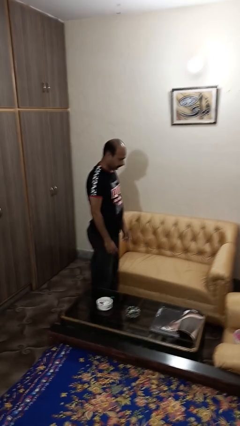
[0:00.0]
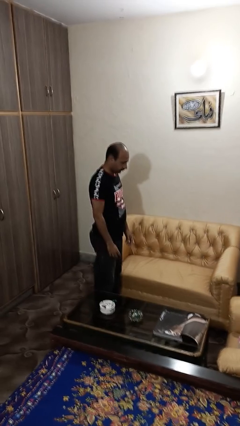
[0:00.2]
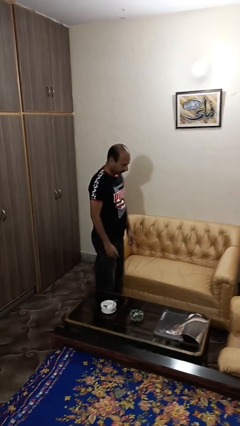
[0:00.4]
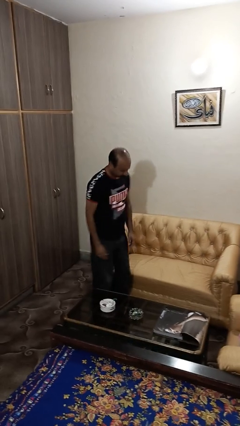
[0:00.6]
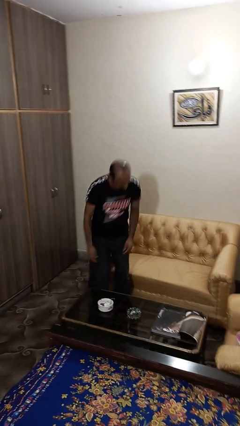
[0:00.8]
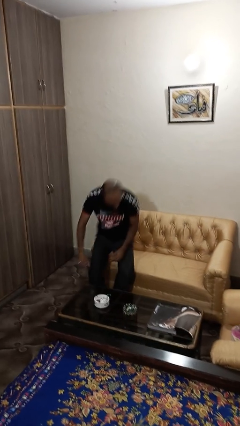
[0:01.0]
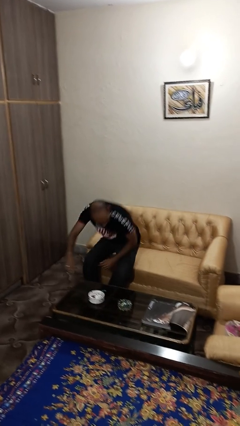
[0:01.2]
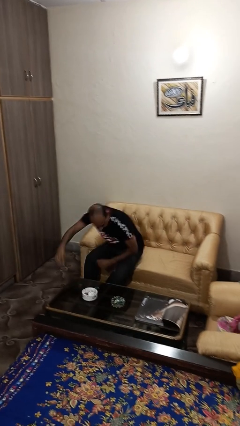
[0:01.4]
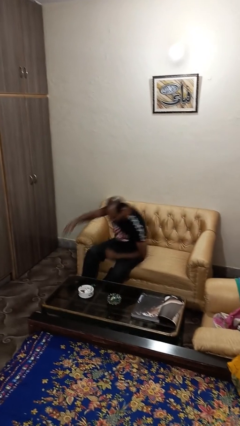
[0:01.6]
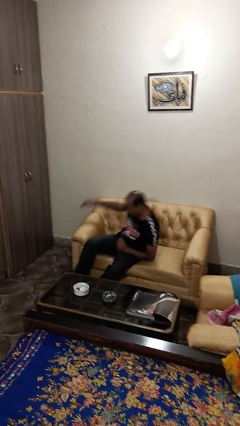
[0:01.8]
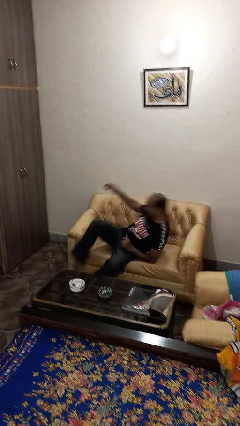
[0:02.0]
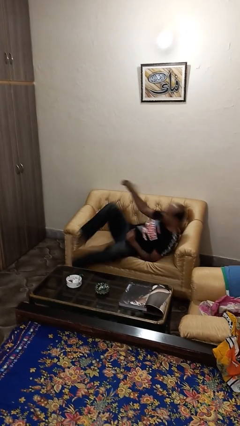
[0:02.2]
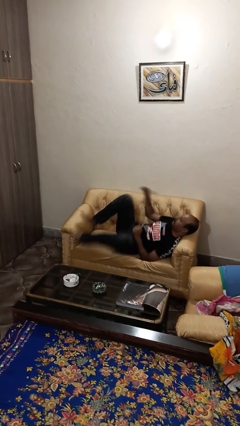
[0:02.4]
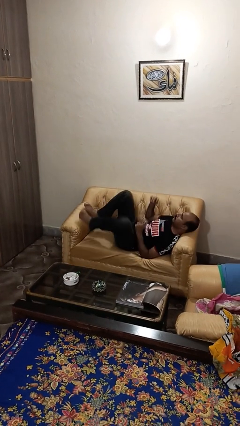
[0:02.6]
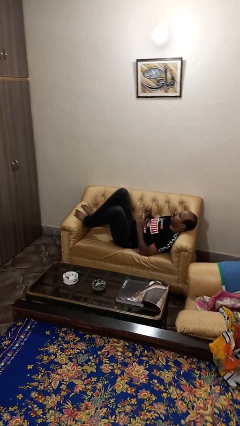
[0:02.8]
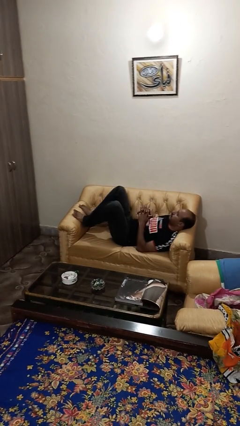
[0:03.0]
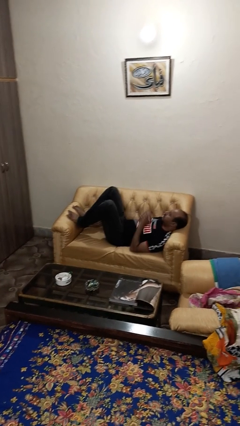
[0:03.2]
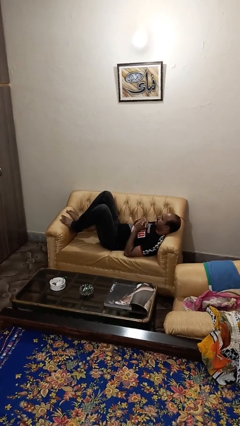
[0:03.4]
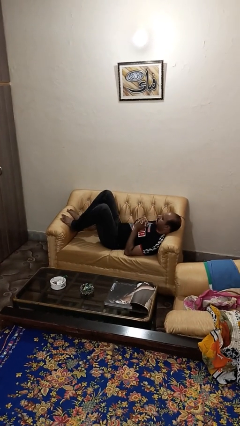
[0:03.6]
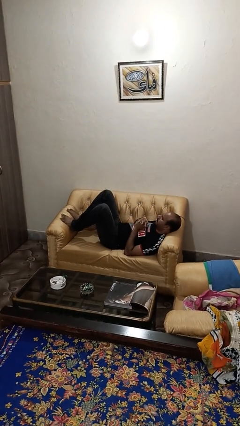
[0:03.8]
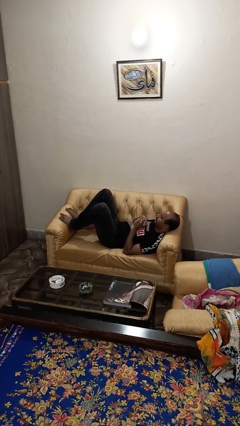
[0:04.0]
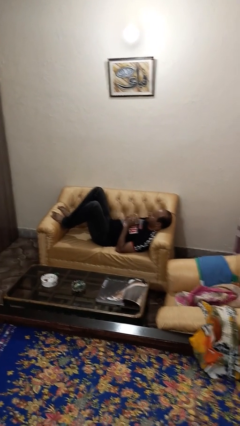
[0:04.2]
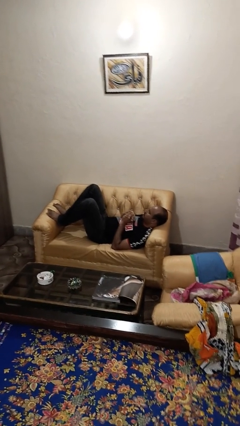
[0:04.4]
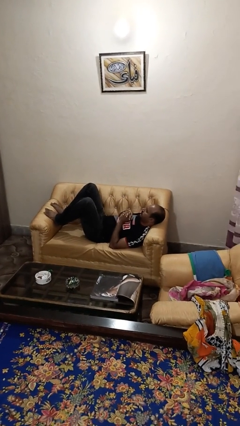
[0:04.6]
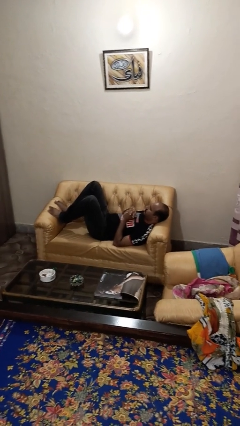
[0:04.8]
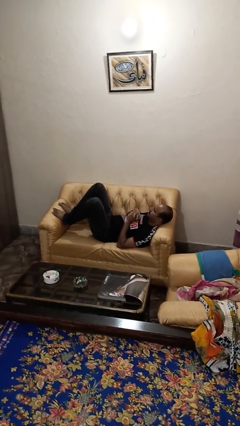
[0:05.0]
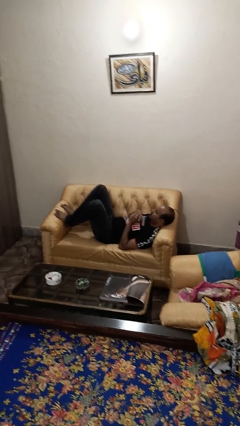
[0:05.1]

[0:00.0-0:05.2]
person lies down on couch

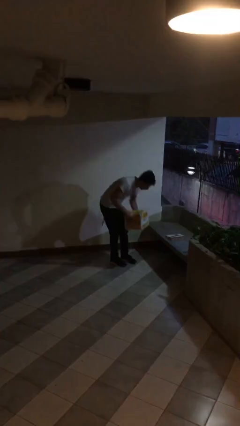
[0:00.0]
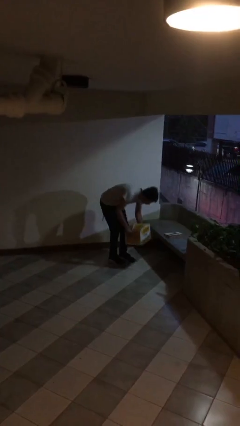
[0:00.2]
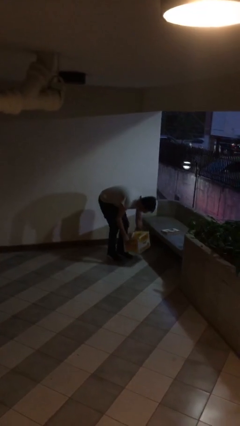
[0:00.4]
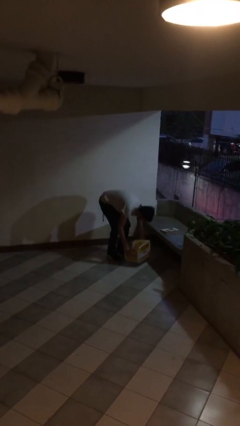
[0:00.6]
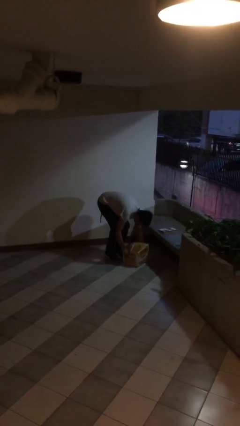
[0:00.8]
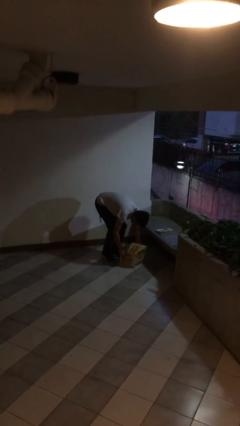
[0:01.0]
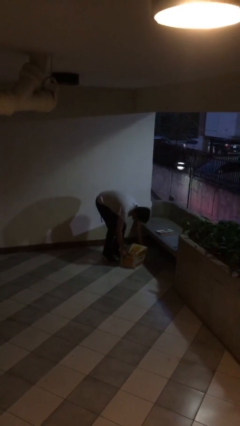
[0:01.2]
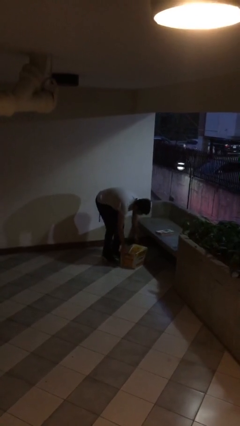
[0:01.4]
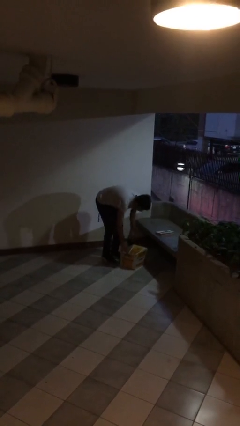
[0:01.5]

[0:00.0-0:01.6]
person puts down object on floor

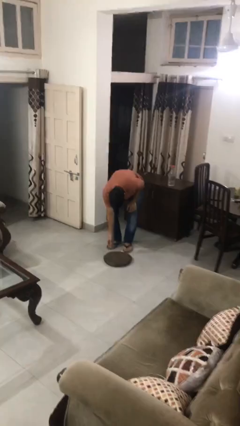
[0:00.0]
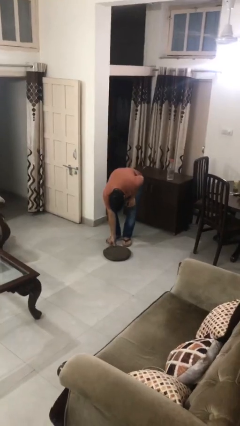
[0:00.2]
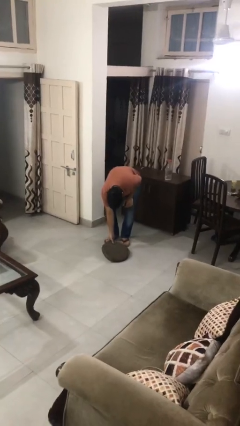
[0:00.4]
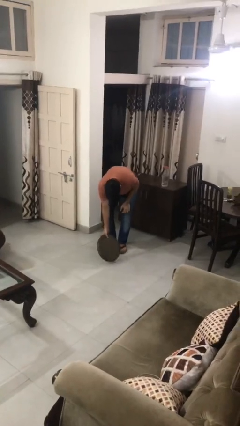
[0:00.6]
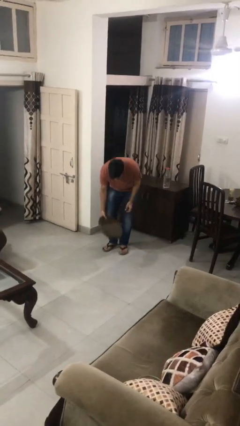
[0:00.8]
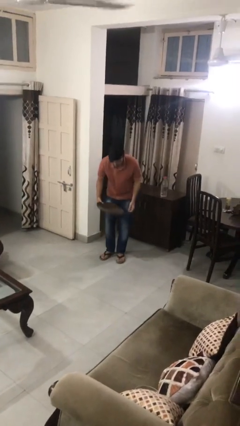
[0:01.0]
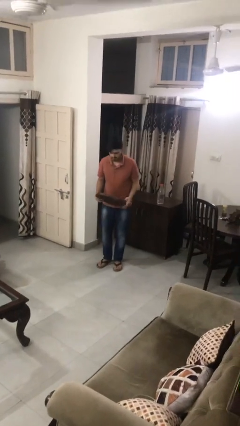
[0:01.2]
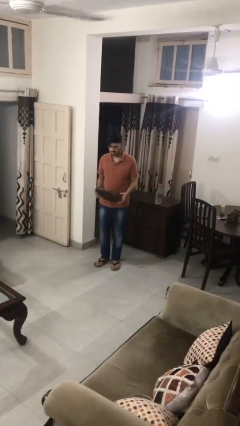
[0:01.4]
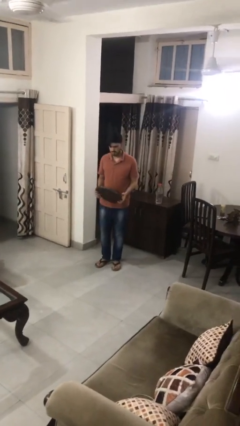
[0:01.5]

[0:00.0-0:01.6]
person picks up object from floor

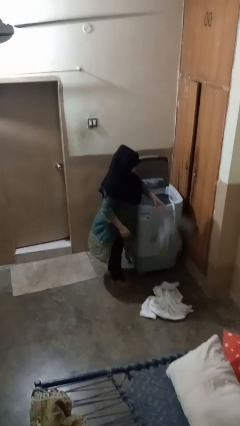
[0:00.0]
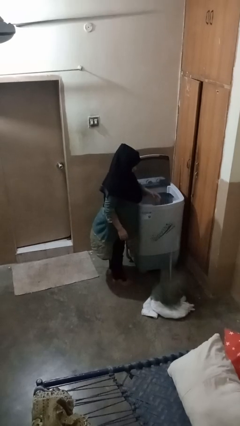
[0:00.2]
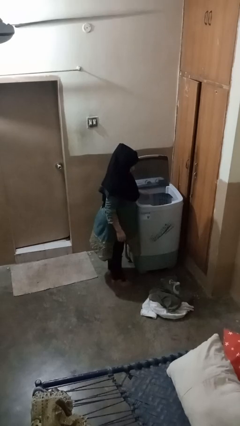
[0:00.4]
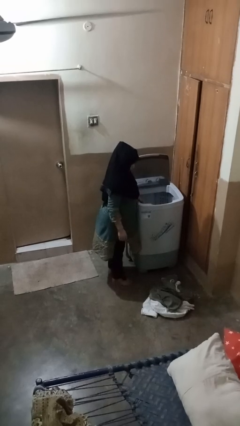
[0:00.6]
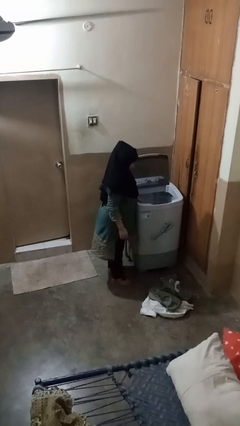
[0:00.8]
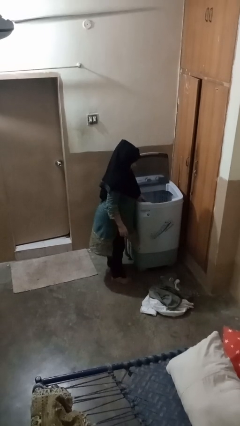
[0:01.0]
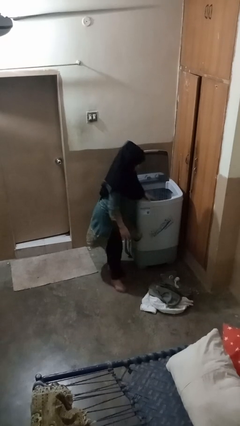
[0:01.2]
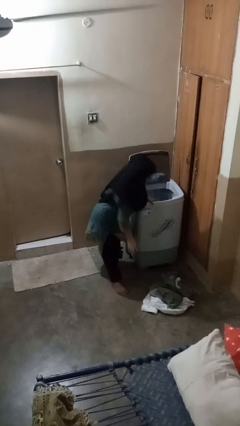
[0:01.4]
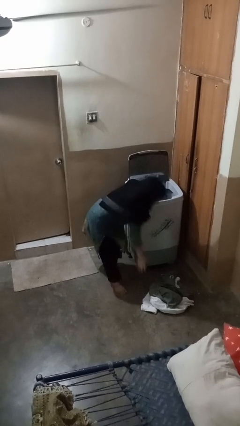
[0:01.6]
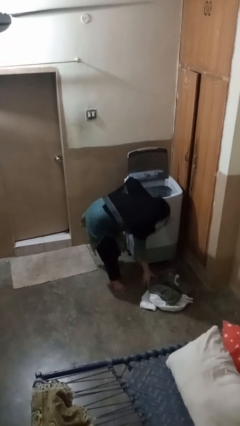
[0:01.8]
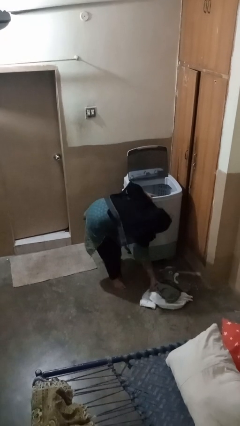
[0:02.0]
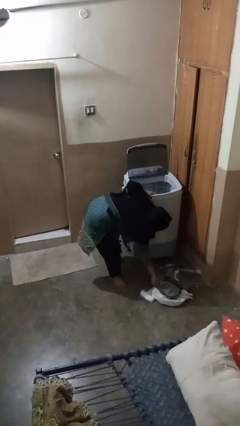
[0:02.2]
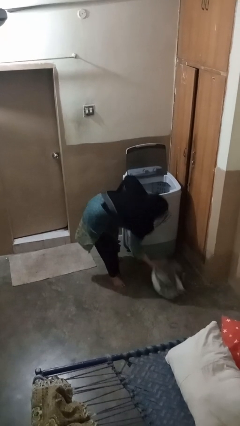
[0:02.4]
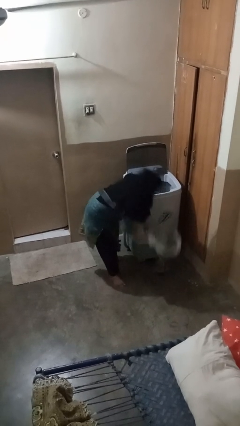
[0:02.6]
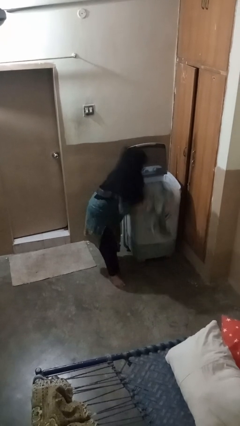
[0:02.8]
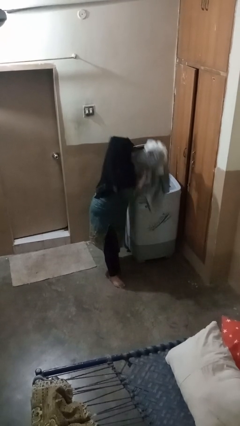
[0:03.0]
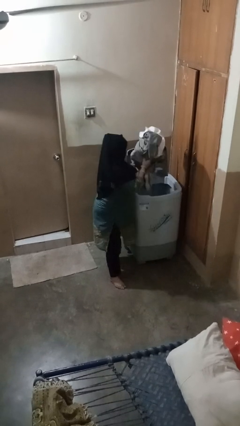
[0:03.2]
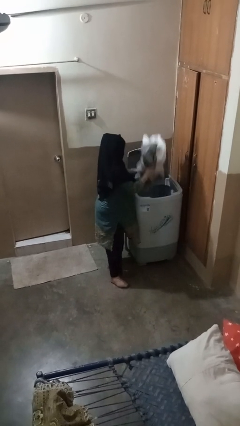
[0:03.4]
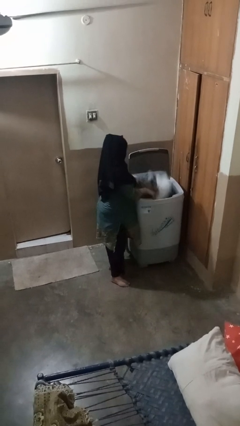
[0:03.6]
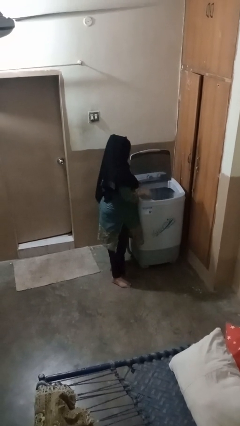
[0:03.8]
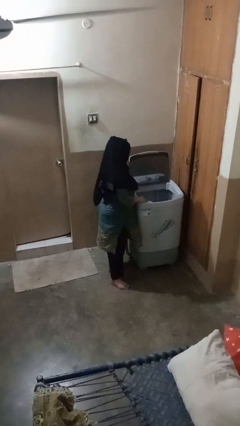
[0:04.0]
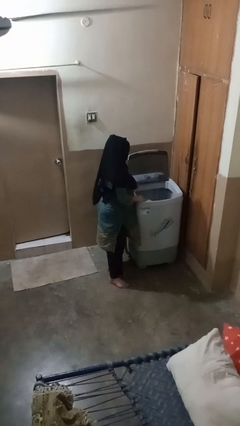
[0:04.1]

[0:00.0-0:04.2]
person loads clotheswasher

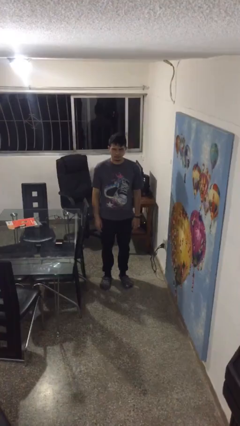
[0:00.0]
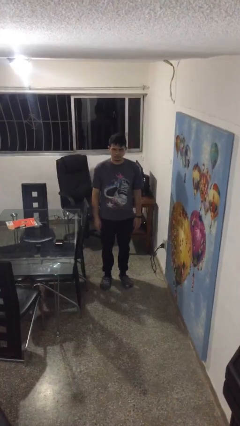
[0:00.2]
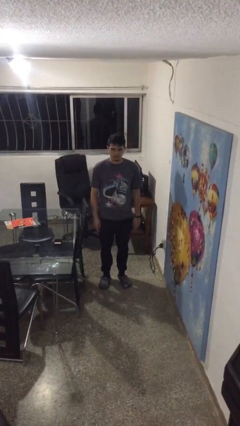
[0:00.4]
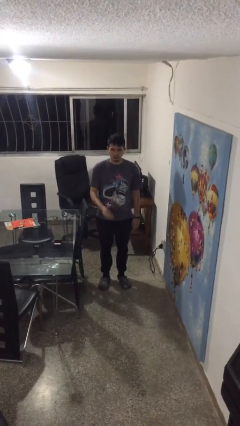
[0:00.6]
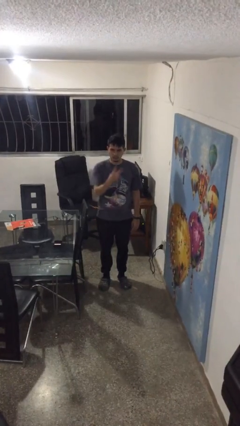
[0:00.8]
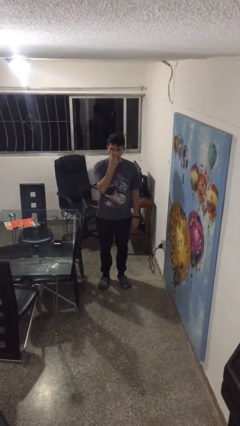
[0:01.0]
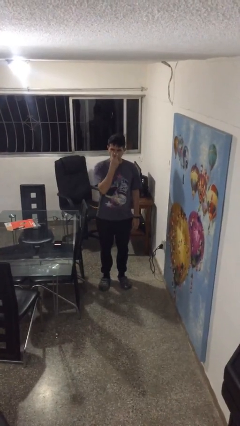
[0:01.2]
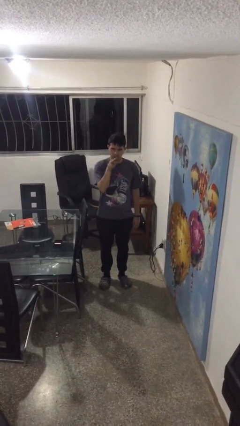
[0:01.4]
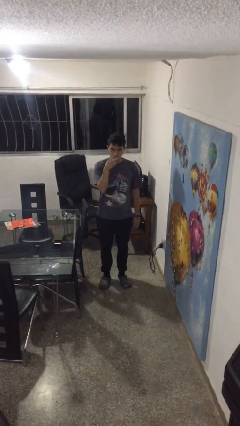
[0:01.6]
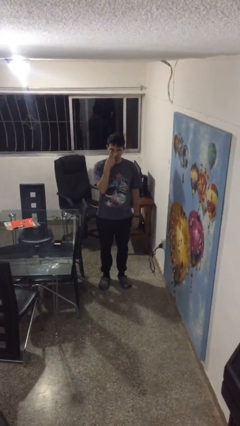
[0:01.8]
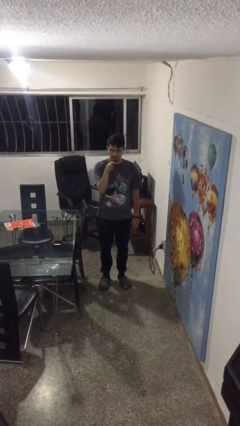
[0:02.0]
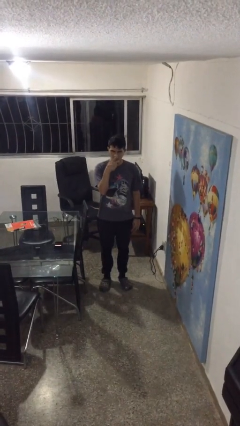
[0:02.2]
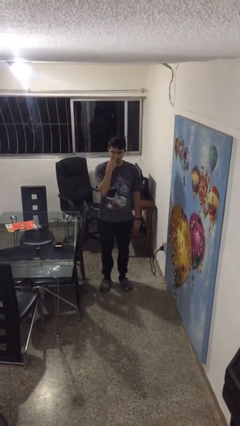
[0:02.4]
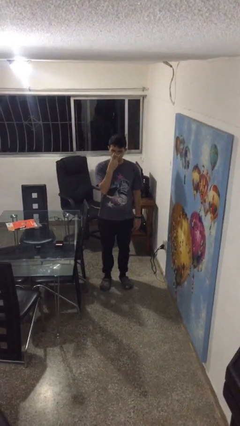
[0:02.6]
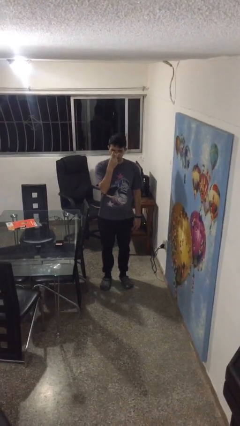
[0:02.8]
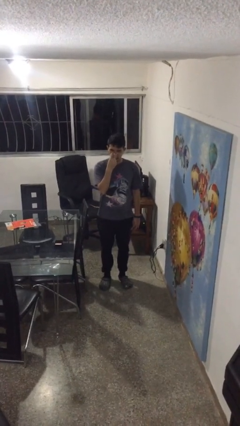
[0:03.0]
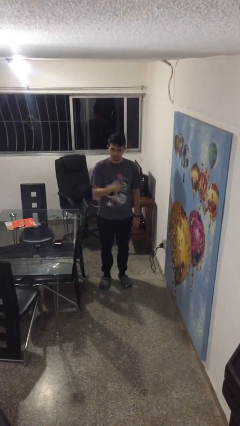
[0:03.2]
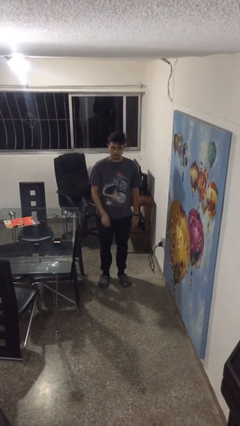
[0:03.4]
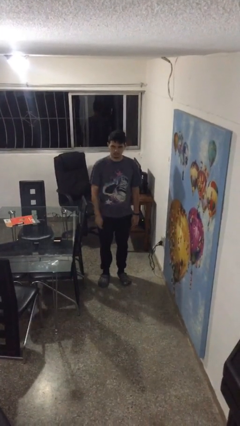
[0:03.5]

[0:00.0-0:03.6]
person gestures watch closely

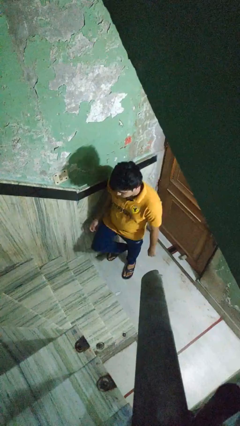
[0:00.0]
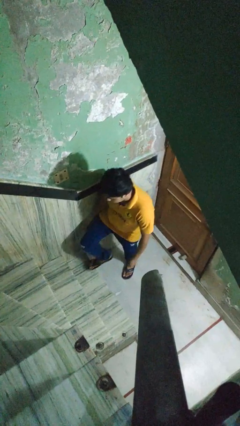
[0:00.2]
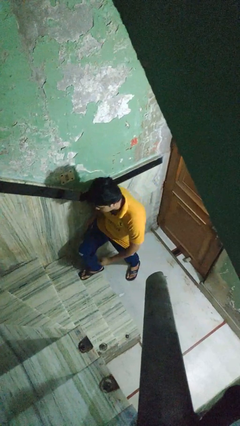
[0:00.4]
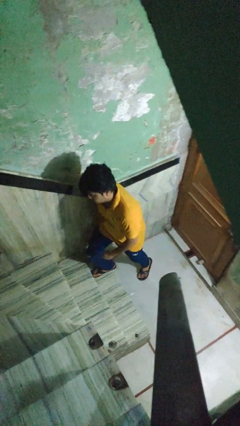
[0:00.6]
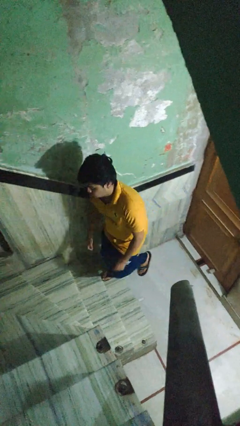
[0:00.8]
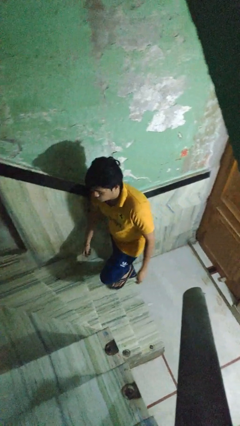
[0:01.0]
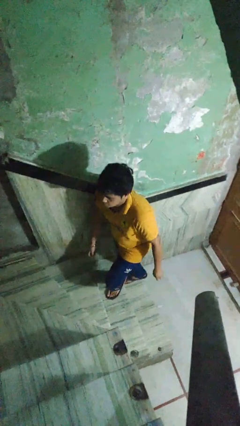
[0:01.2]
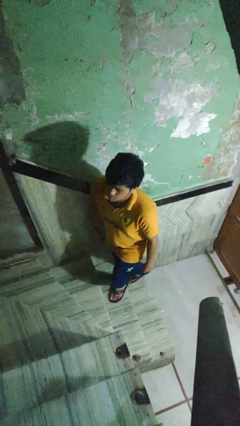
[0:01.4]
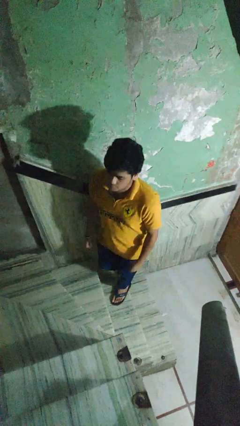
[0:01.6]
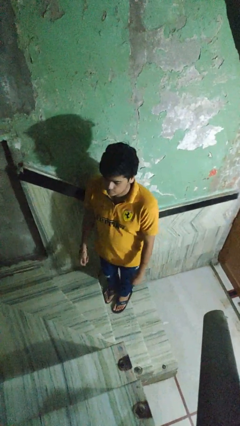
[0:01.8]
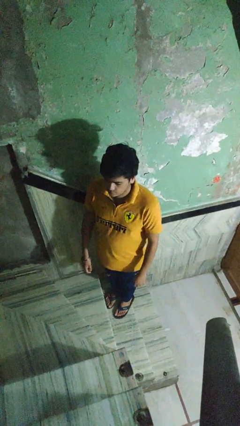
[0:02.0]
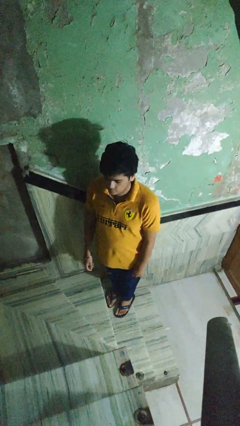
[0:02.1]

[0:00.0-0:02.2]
person climbs up stairs
